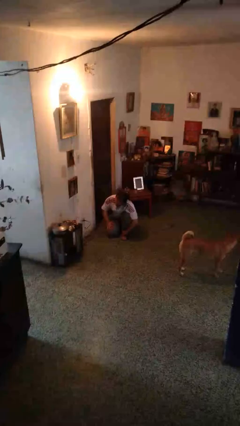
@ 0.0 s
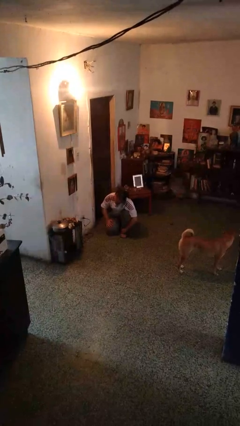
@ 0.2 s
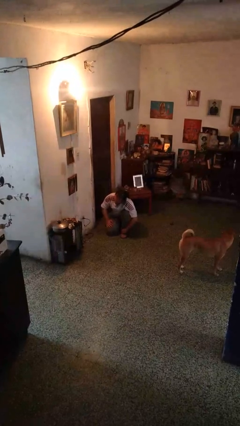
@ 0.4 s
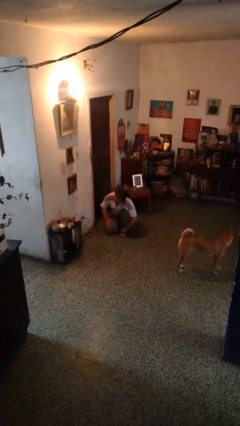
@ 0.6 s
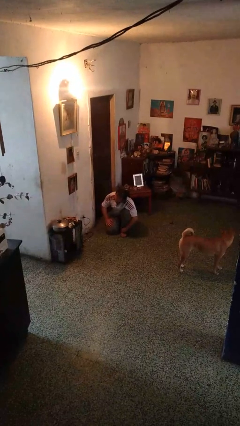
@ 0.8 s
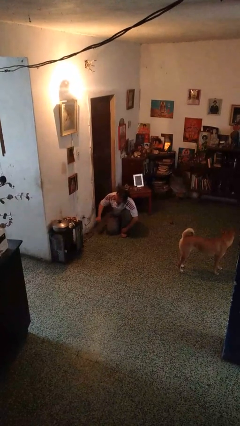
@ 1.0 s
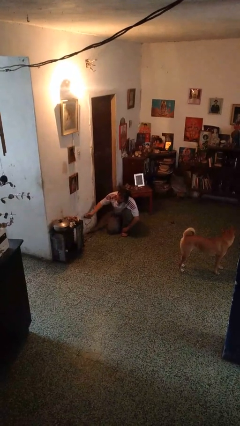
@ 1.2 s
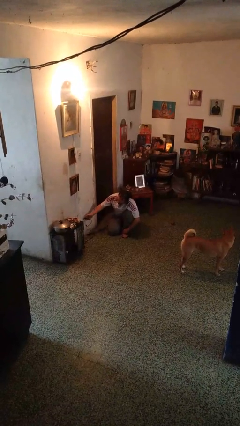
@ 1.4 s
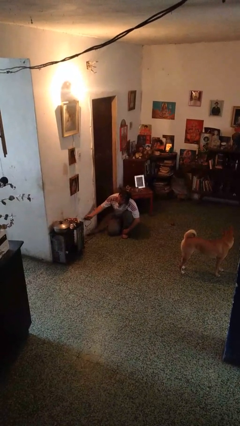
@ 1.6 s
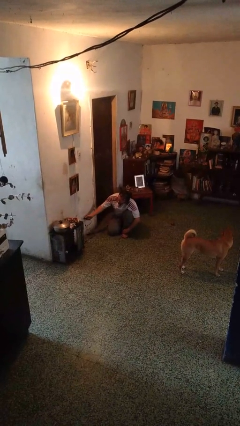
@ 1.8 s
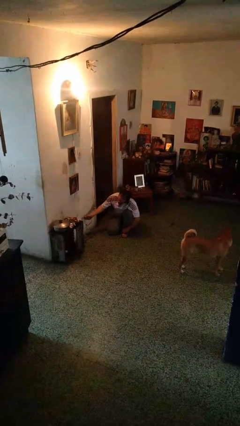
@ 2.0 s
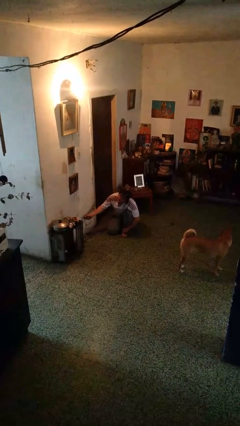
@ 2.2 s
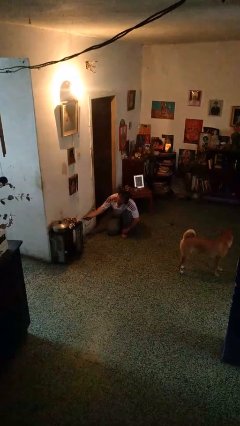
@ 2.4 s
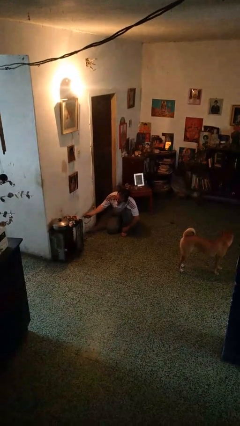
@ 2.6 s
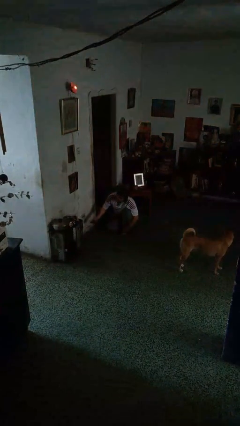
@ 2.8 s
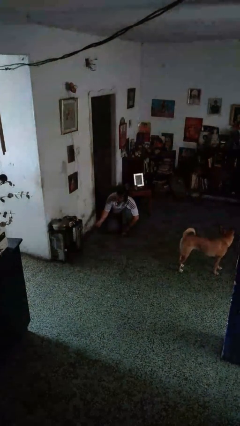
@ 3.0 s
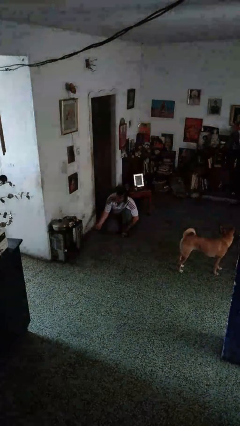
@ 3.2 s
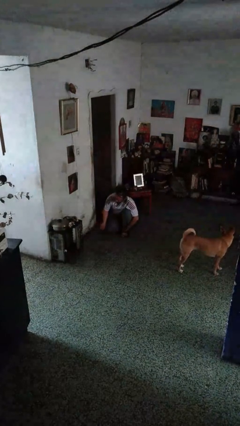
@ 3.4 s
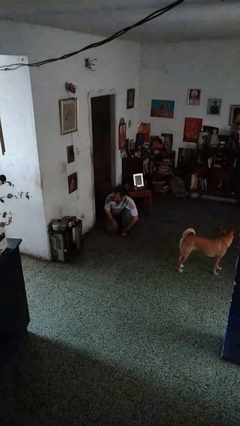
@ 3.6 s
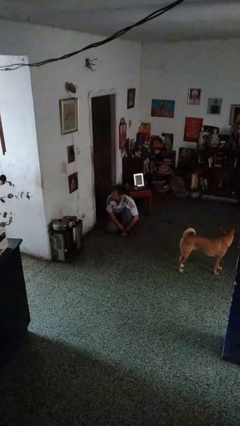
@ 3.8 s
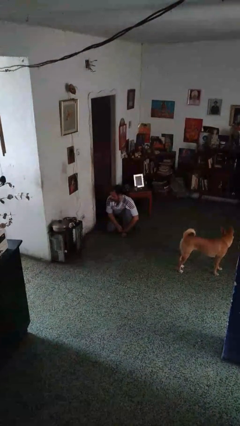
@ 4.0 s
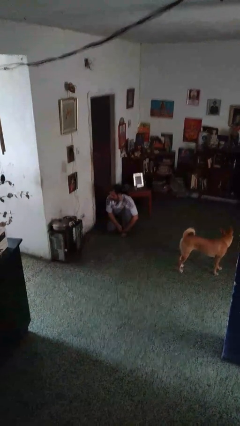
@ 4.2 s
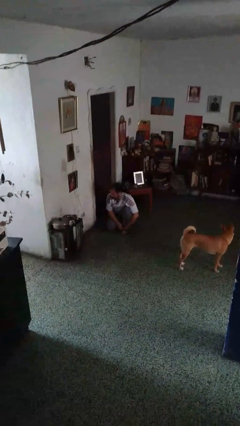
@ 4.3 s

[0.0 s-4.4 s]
person unplugs from electrical socket

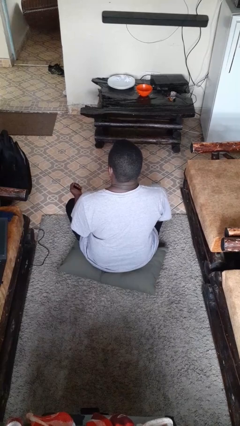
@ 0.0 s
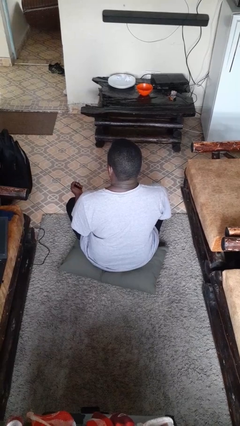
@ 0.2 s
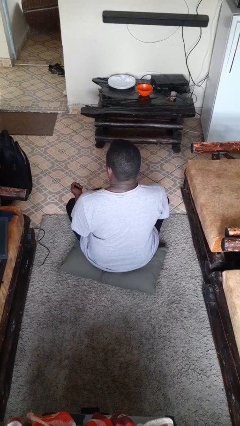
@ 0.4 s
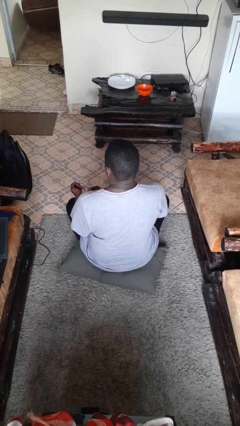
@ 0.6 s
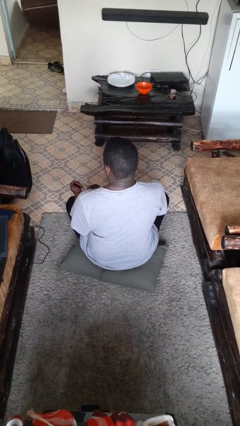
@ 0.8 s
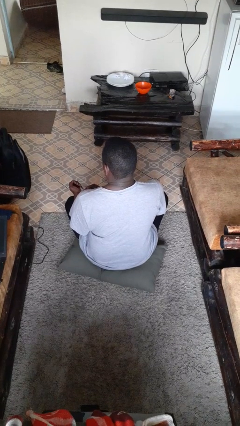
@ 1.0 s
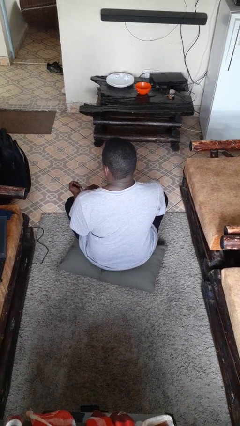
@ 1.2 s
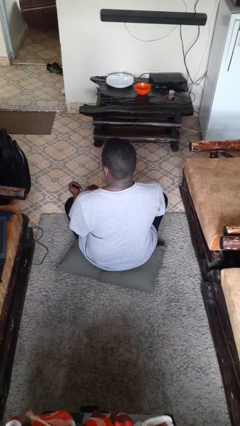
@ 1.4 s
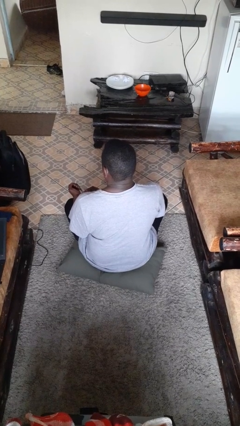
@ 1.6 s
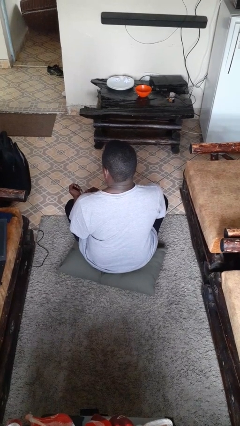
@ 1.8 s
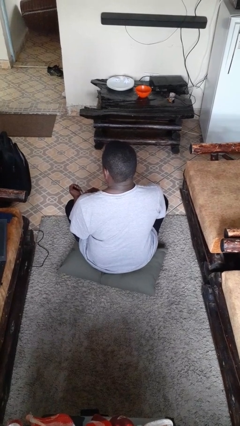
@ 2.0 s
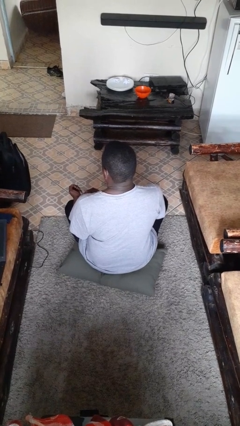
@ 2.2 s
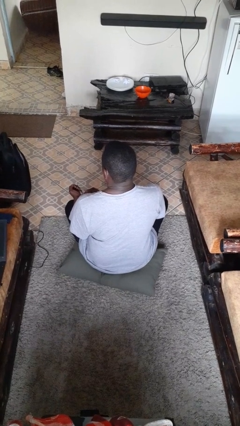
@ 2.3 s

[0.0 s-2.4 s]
person clips fingernails

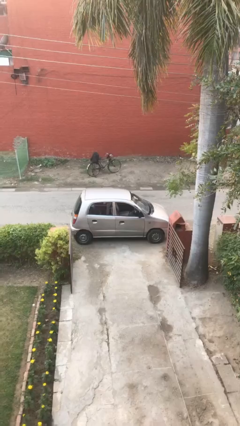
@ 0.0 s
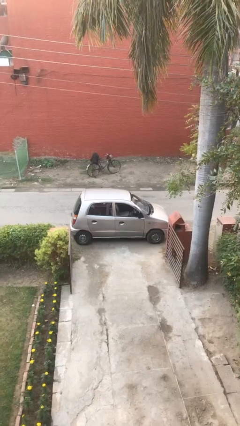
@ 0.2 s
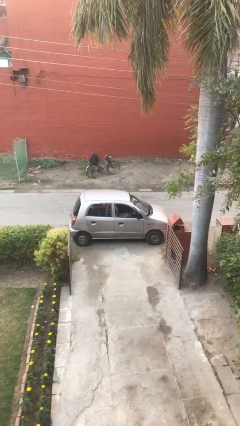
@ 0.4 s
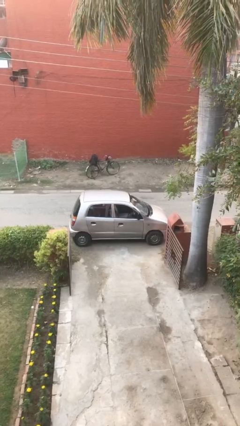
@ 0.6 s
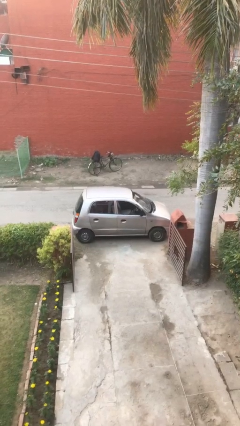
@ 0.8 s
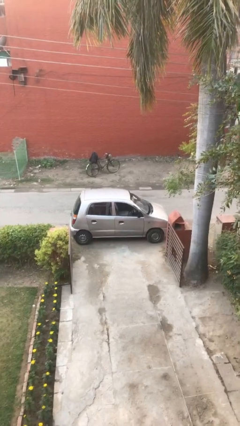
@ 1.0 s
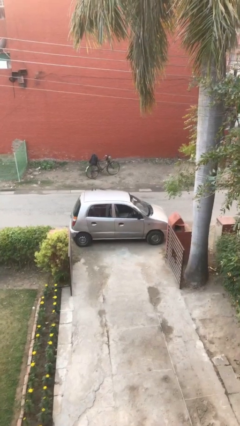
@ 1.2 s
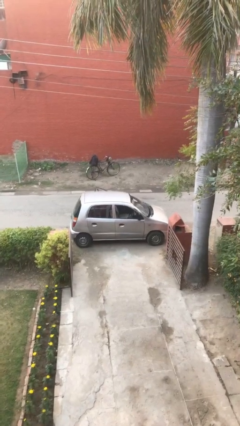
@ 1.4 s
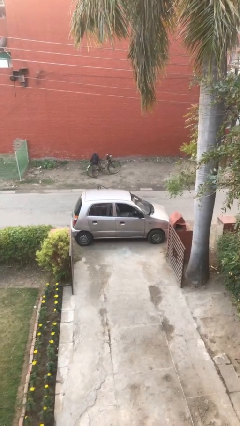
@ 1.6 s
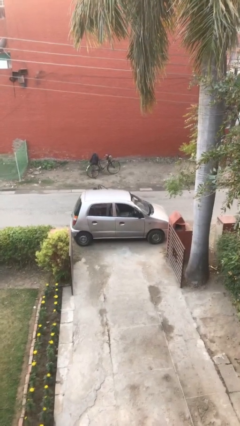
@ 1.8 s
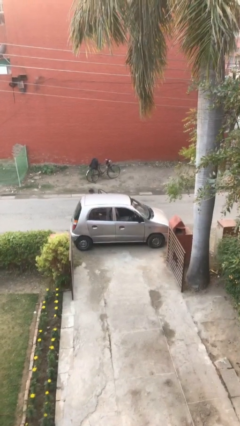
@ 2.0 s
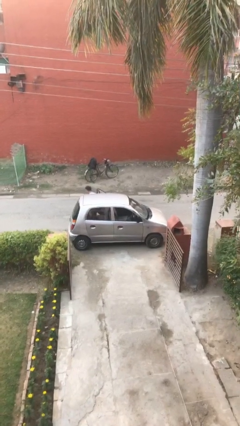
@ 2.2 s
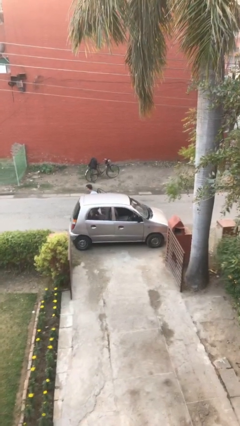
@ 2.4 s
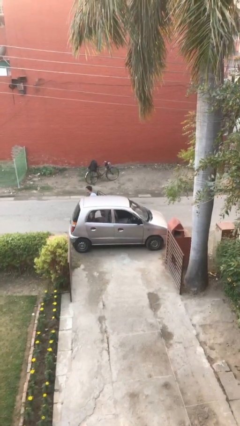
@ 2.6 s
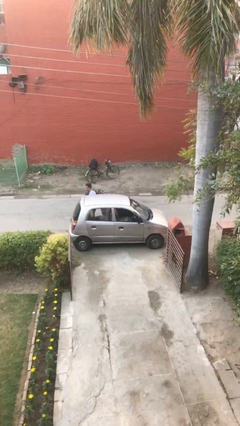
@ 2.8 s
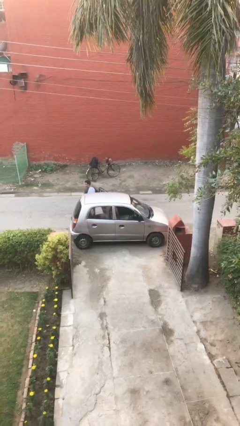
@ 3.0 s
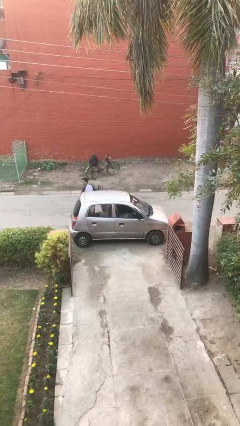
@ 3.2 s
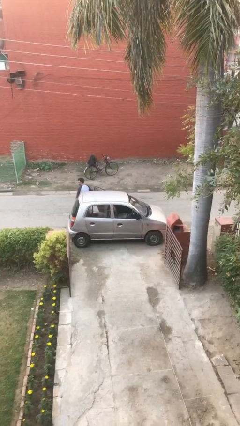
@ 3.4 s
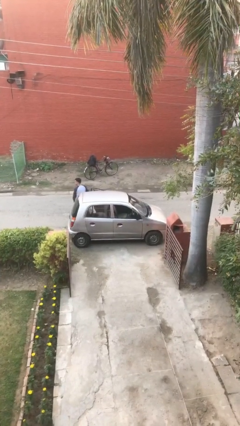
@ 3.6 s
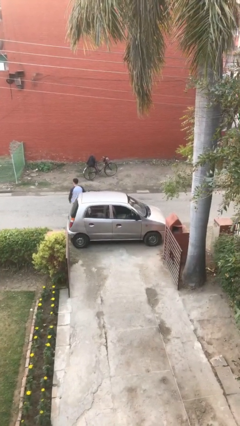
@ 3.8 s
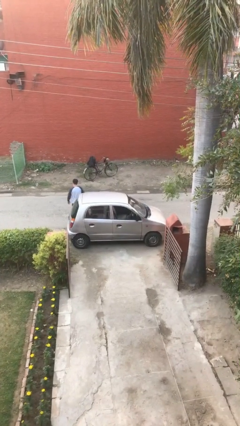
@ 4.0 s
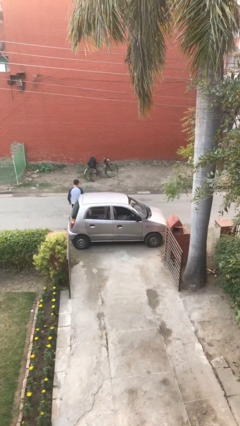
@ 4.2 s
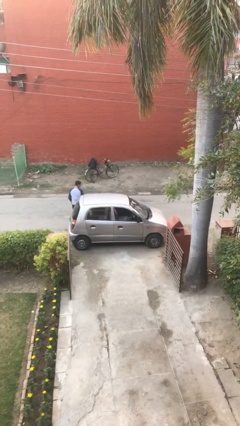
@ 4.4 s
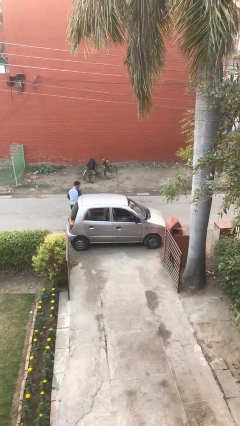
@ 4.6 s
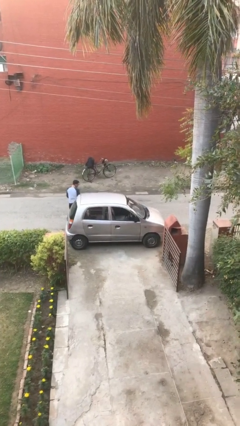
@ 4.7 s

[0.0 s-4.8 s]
car drops off person

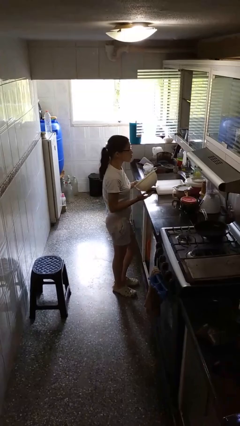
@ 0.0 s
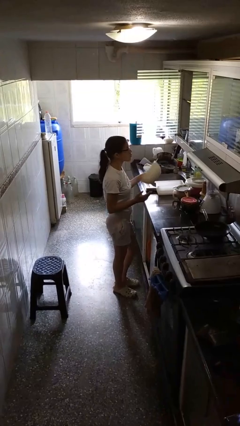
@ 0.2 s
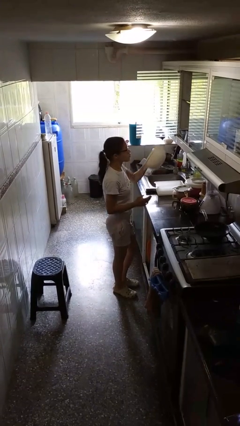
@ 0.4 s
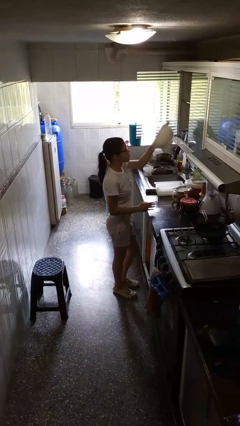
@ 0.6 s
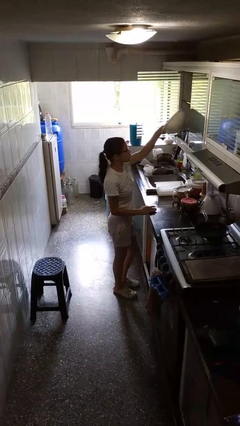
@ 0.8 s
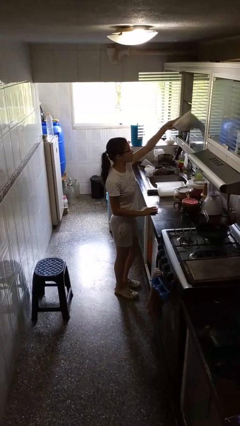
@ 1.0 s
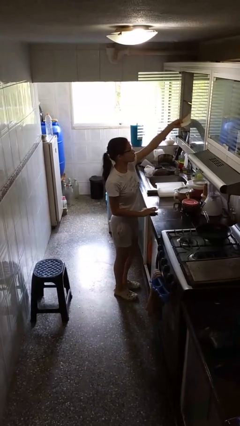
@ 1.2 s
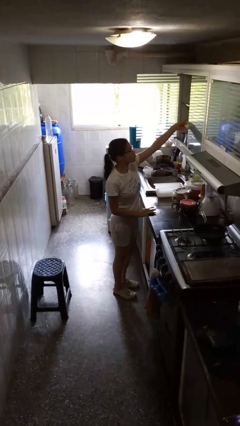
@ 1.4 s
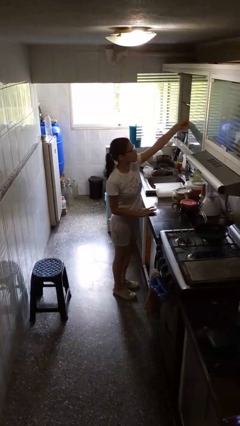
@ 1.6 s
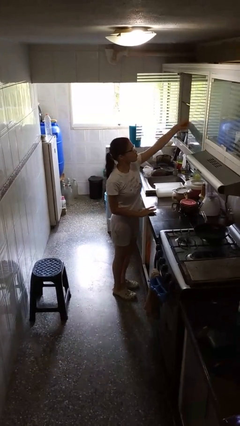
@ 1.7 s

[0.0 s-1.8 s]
person puts down object into cabinet

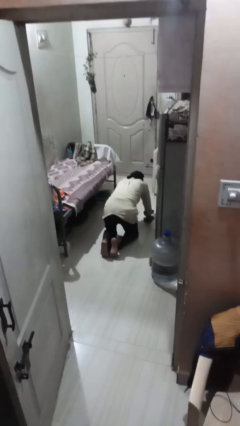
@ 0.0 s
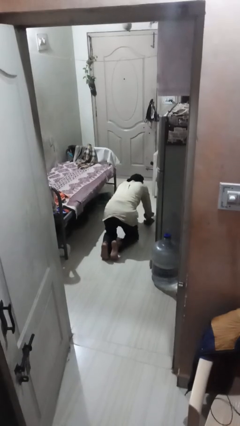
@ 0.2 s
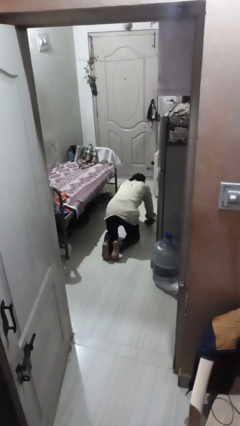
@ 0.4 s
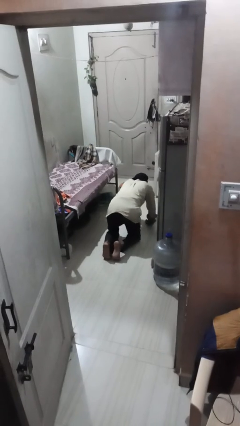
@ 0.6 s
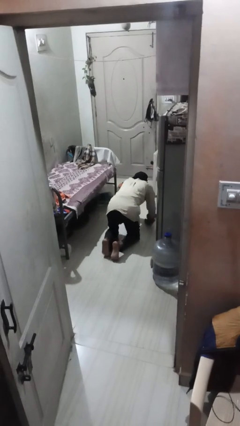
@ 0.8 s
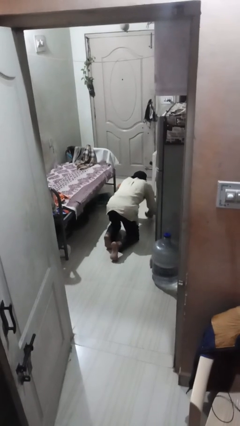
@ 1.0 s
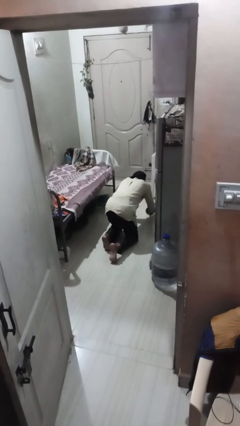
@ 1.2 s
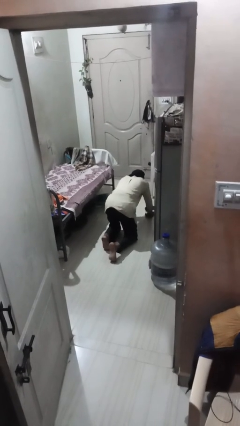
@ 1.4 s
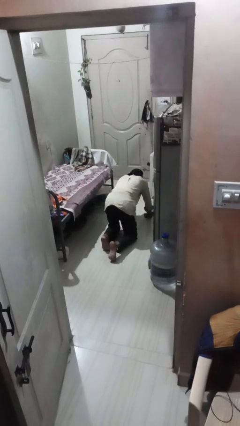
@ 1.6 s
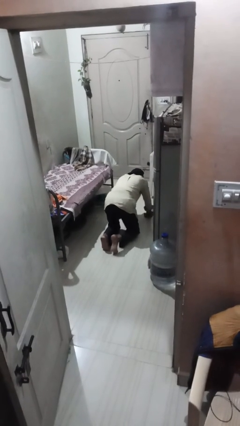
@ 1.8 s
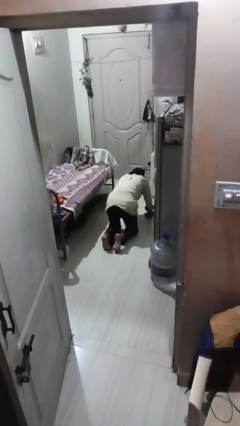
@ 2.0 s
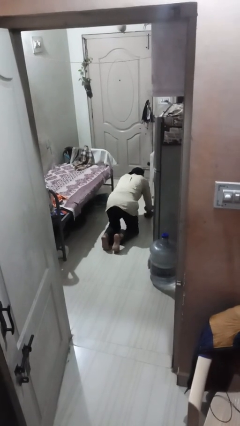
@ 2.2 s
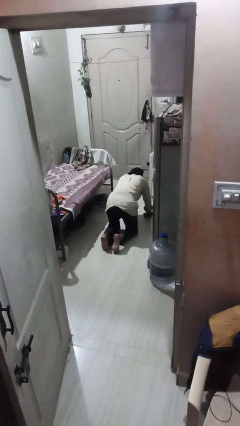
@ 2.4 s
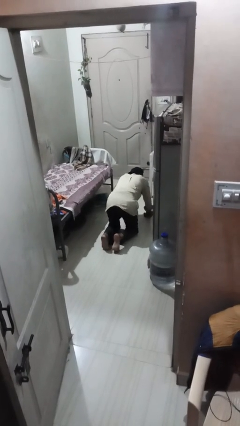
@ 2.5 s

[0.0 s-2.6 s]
person crawls

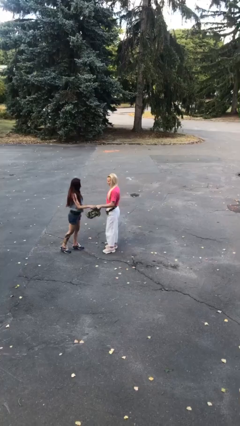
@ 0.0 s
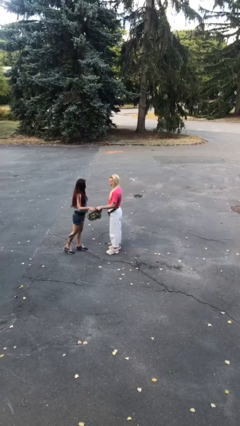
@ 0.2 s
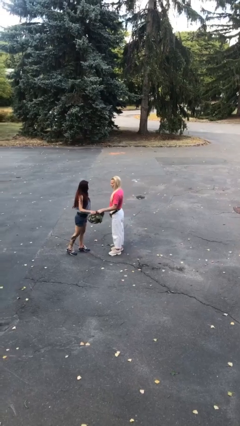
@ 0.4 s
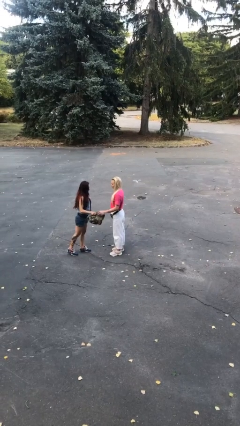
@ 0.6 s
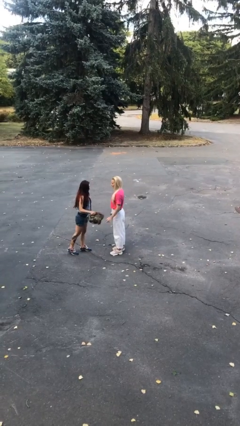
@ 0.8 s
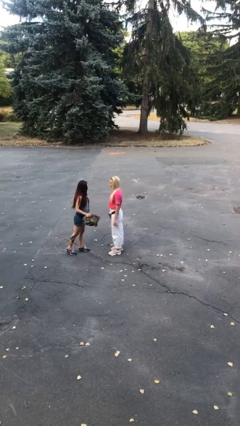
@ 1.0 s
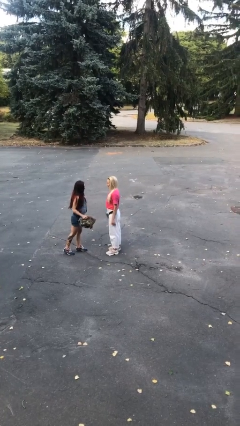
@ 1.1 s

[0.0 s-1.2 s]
person transfers object to person
